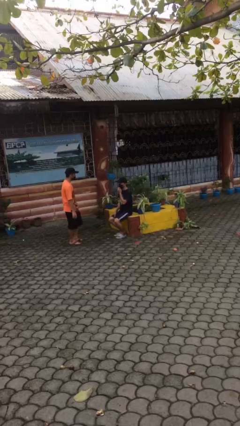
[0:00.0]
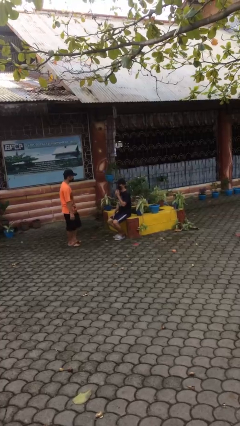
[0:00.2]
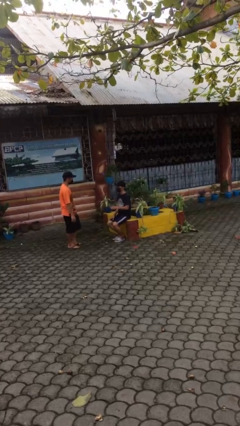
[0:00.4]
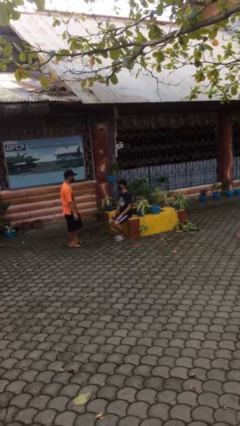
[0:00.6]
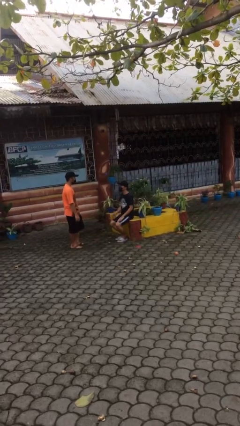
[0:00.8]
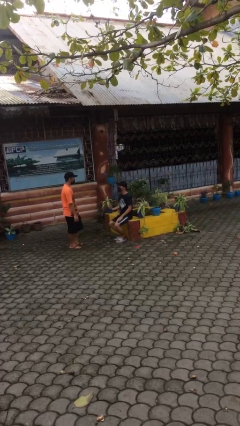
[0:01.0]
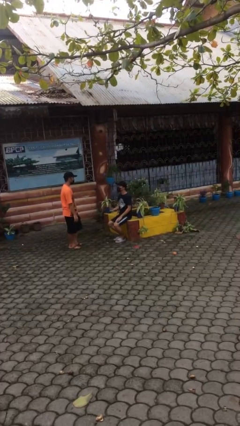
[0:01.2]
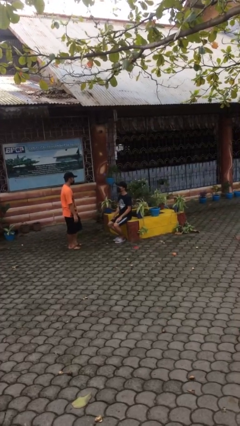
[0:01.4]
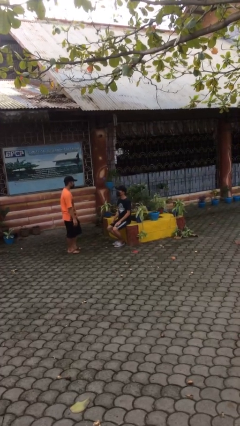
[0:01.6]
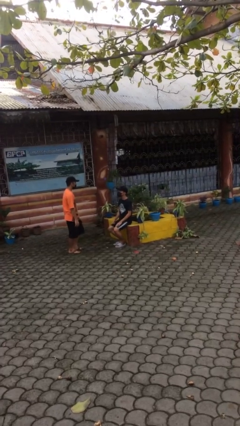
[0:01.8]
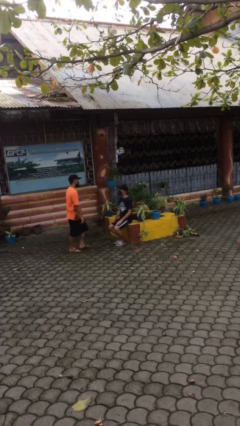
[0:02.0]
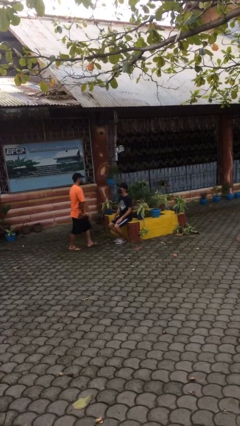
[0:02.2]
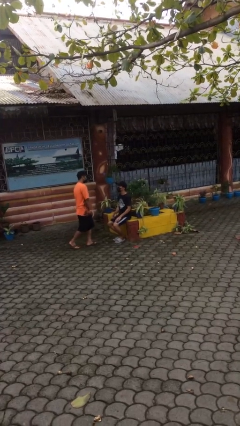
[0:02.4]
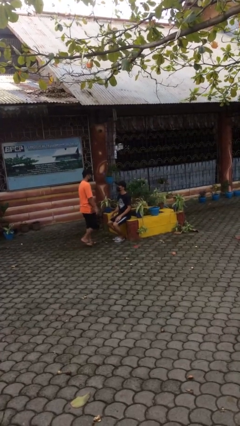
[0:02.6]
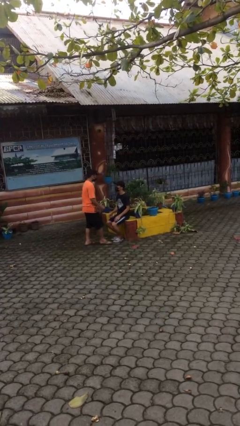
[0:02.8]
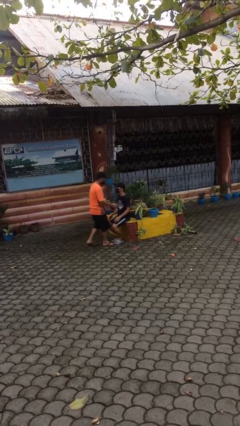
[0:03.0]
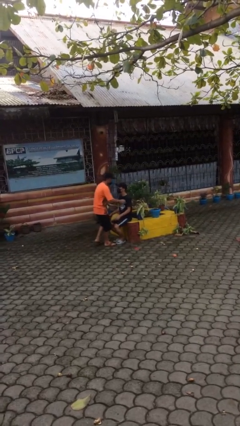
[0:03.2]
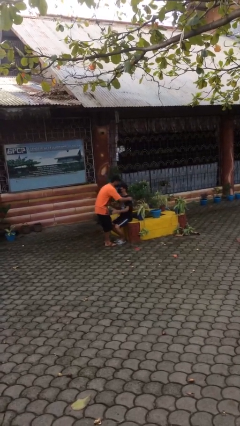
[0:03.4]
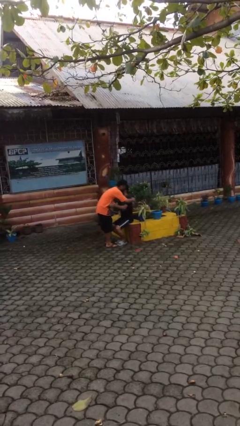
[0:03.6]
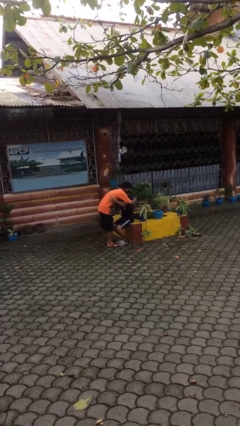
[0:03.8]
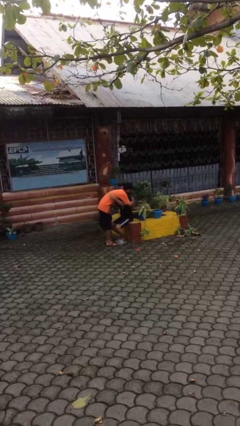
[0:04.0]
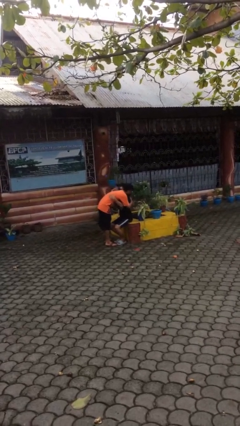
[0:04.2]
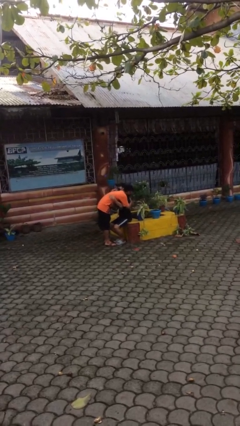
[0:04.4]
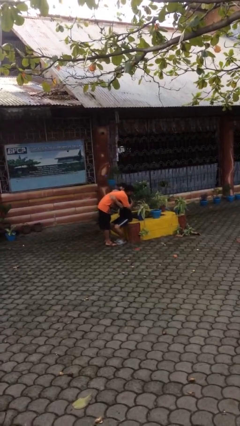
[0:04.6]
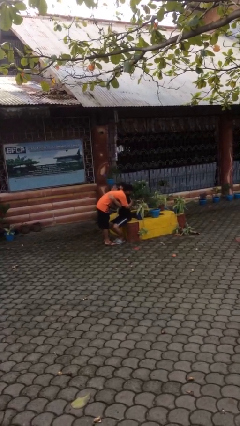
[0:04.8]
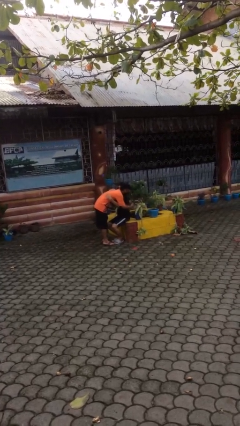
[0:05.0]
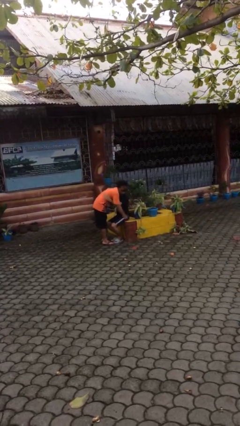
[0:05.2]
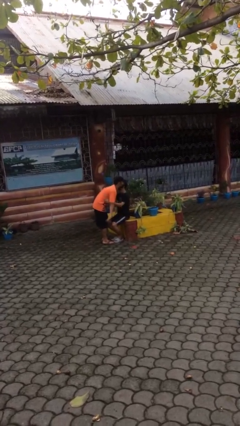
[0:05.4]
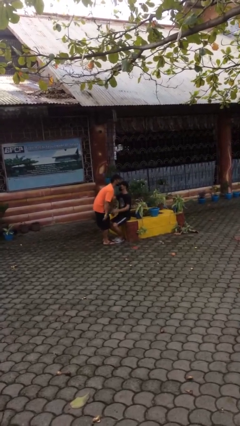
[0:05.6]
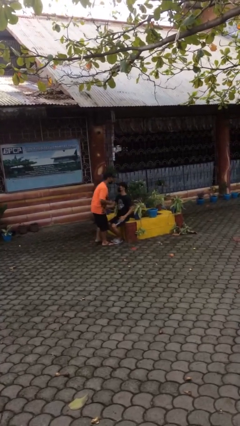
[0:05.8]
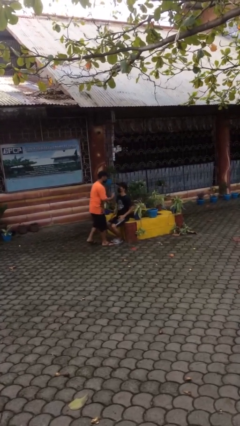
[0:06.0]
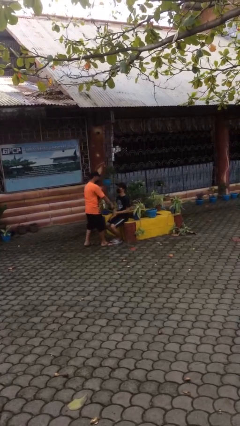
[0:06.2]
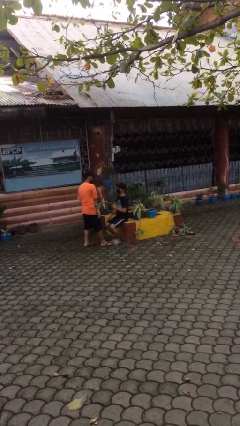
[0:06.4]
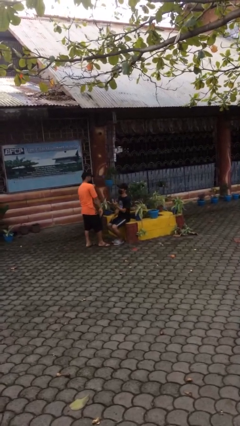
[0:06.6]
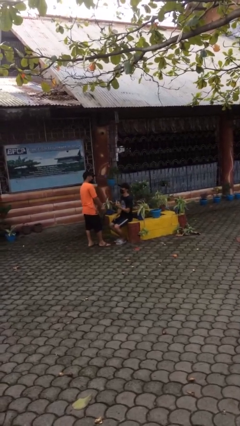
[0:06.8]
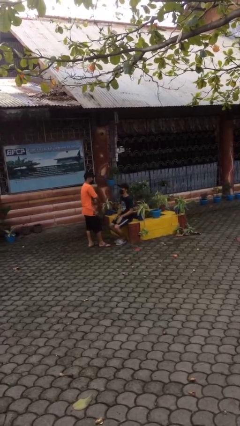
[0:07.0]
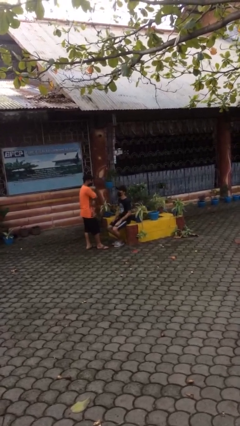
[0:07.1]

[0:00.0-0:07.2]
person embraces person

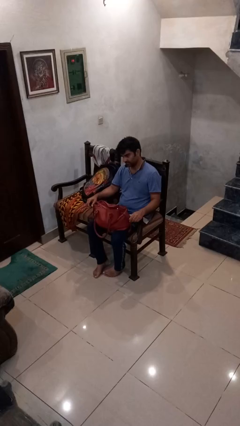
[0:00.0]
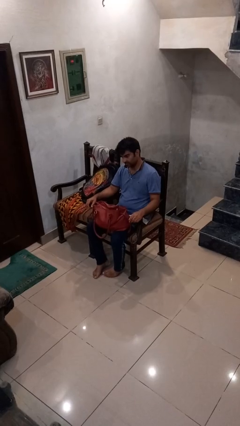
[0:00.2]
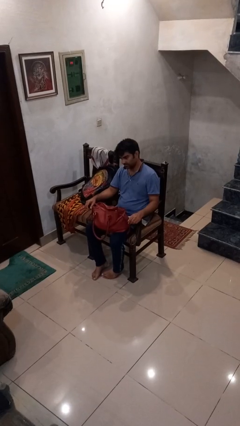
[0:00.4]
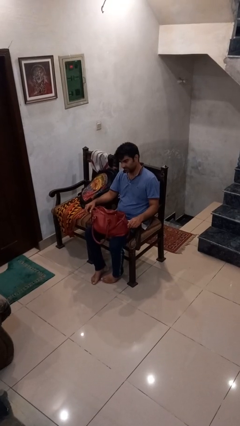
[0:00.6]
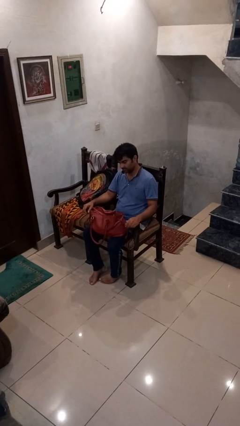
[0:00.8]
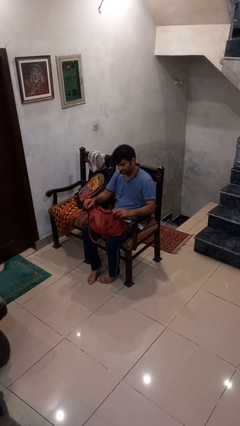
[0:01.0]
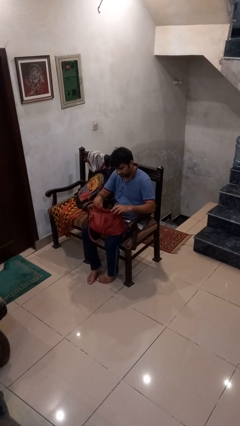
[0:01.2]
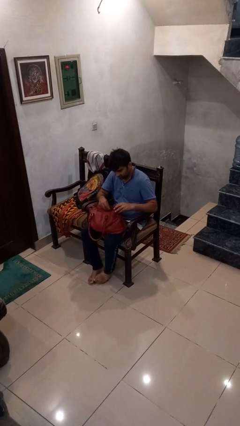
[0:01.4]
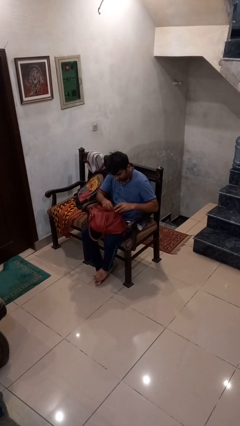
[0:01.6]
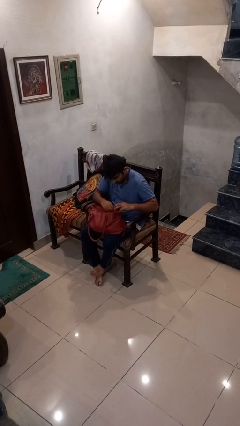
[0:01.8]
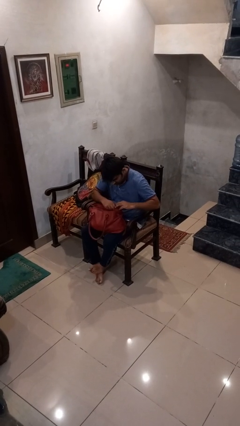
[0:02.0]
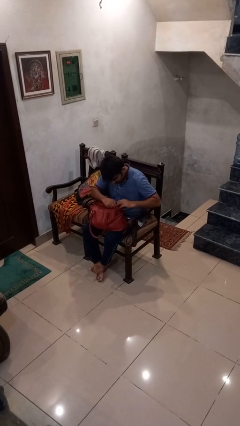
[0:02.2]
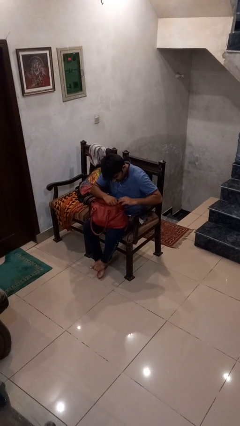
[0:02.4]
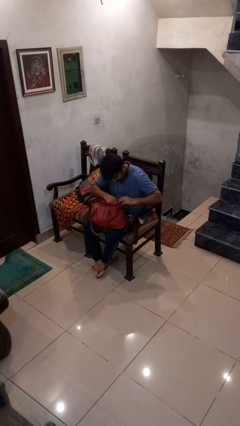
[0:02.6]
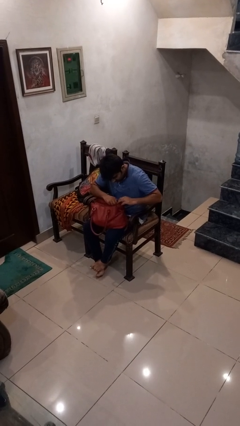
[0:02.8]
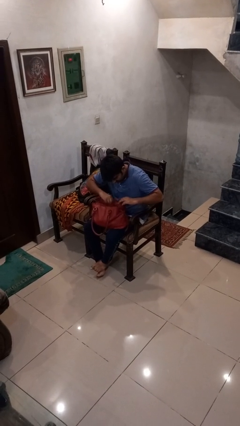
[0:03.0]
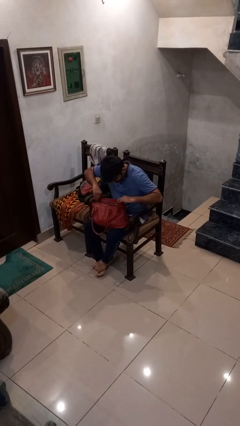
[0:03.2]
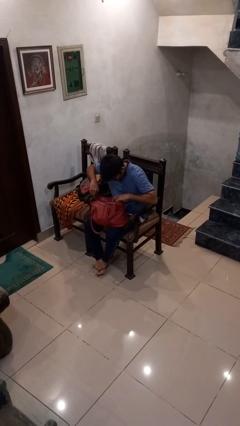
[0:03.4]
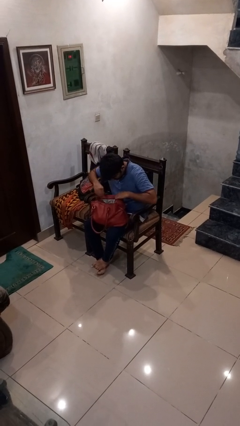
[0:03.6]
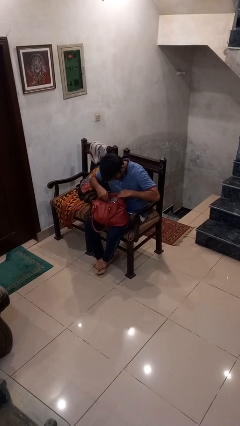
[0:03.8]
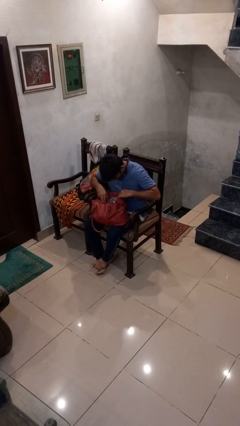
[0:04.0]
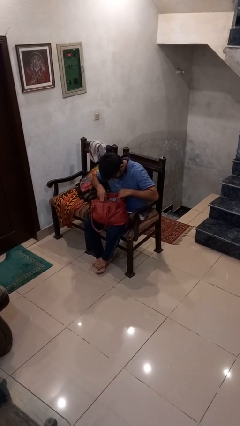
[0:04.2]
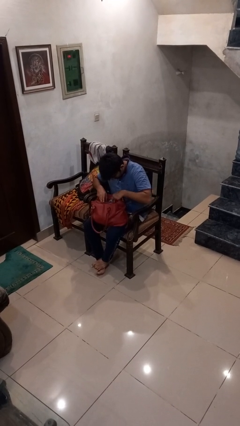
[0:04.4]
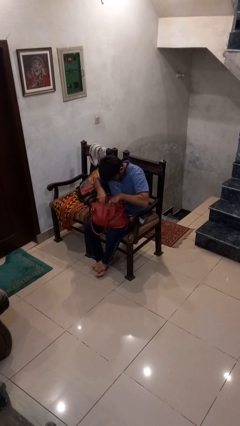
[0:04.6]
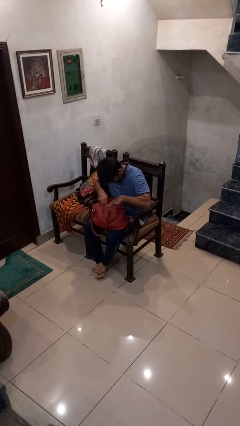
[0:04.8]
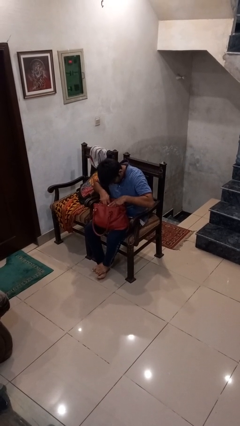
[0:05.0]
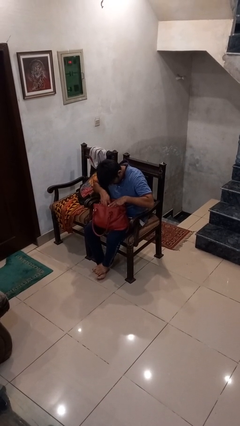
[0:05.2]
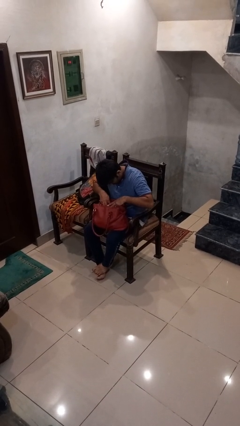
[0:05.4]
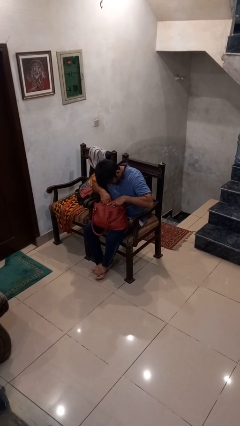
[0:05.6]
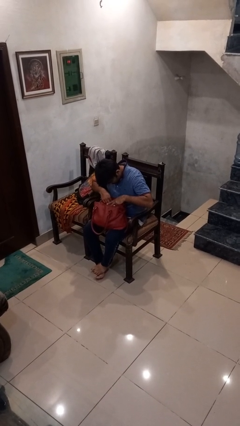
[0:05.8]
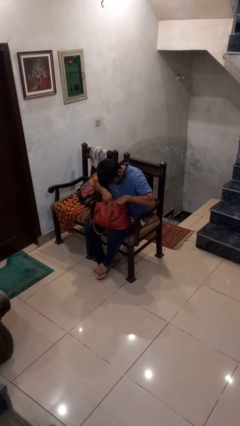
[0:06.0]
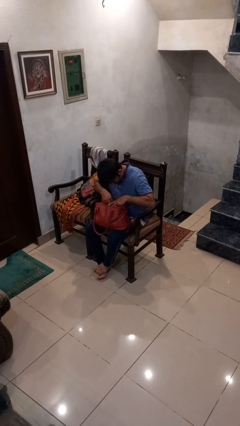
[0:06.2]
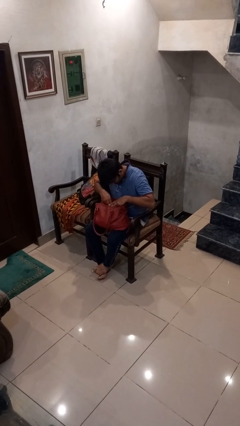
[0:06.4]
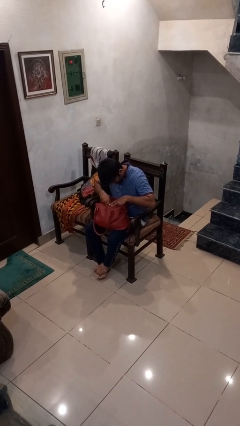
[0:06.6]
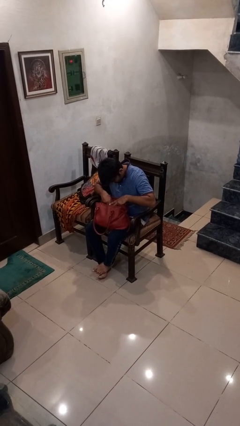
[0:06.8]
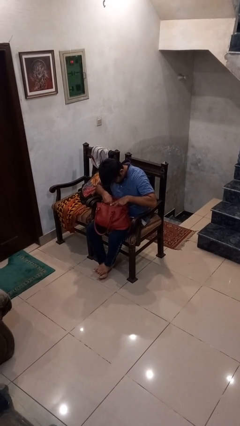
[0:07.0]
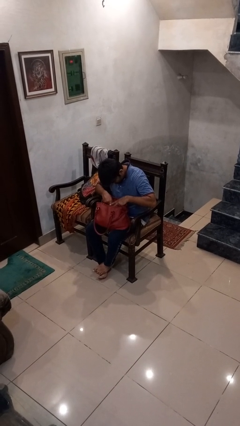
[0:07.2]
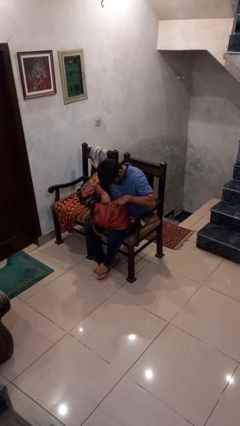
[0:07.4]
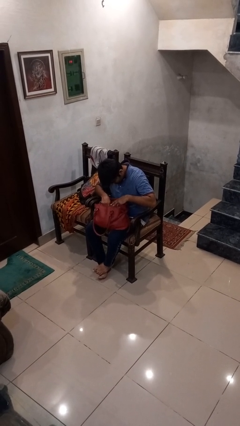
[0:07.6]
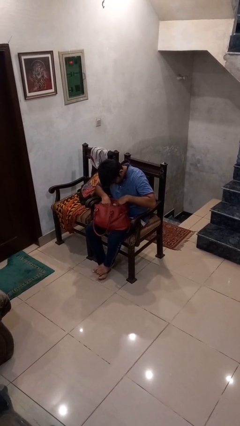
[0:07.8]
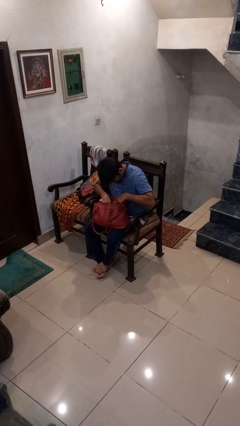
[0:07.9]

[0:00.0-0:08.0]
person searches in purse

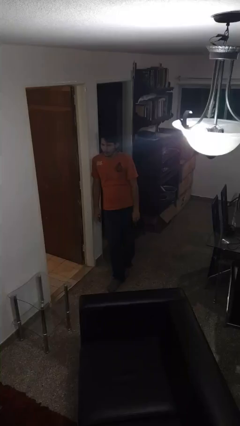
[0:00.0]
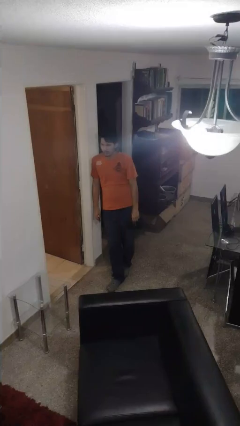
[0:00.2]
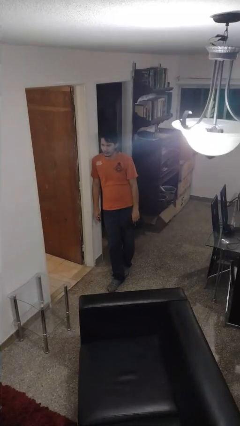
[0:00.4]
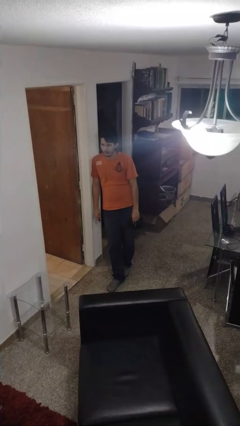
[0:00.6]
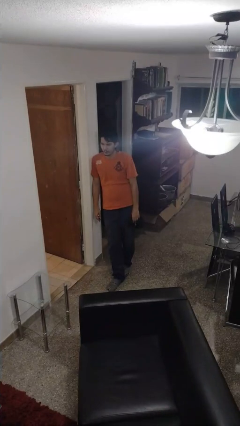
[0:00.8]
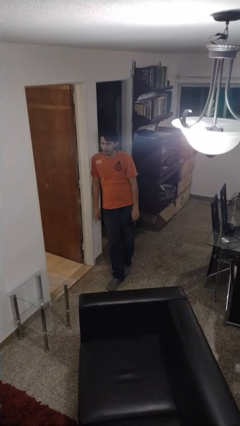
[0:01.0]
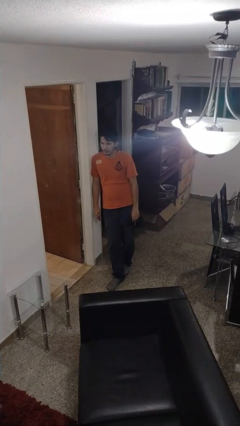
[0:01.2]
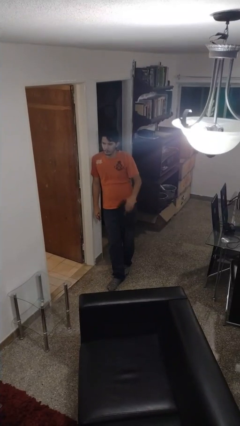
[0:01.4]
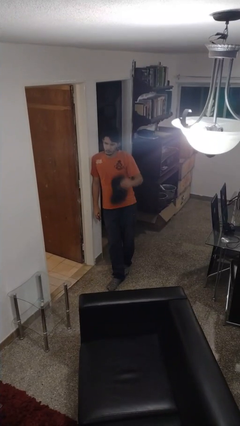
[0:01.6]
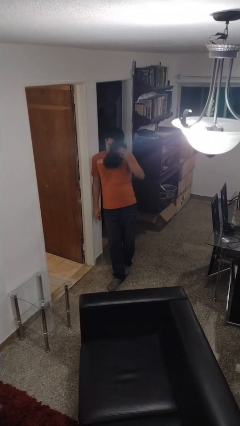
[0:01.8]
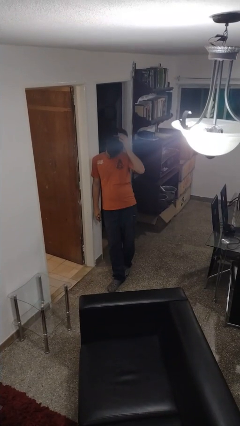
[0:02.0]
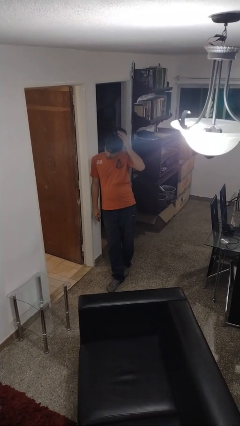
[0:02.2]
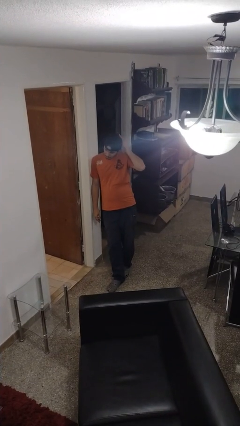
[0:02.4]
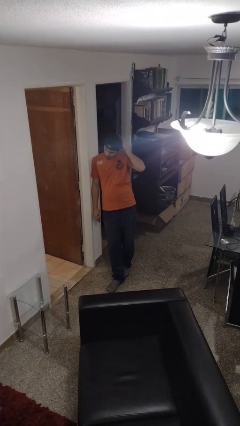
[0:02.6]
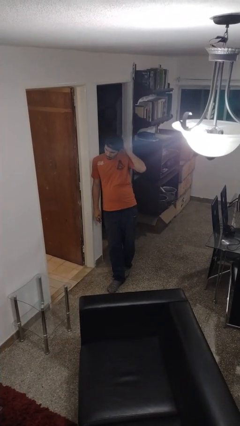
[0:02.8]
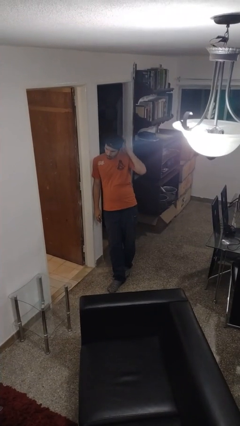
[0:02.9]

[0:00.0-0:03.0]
person puts on hat
